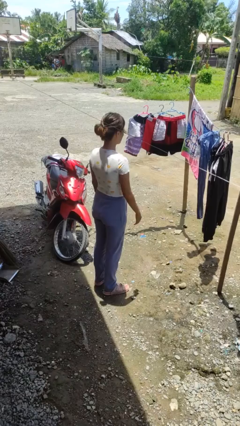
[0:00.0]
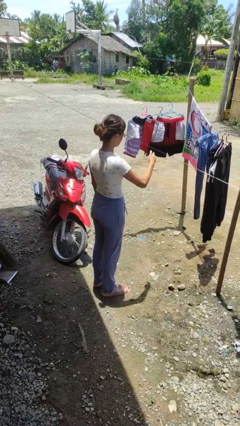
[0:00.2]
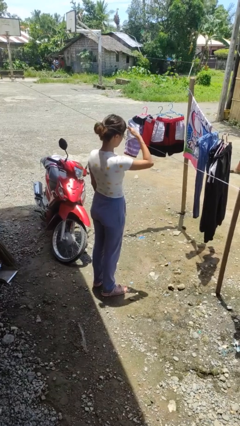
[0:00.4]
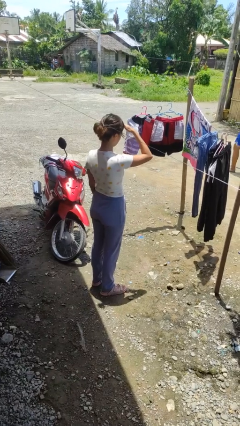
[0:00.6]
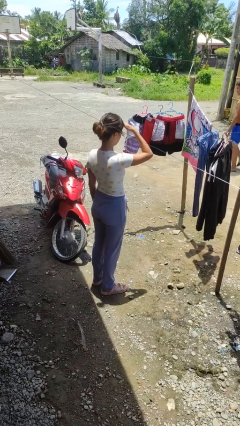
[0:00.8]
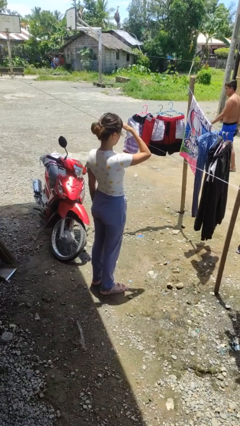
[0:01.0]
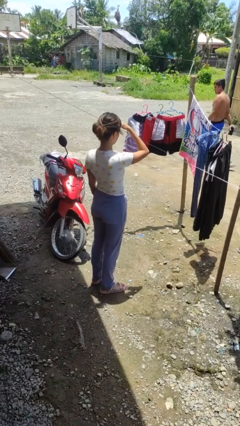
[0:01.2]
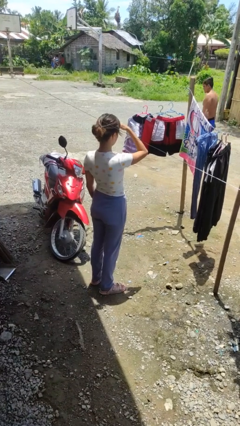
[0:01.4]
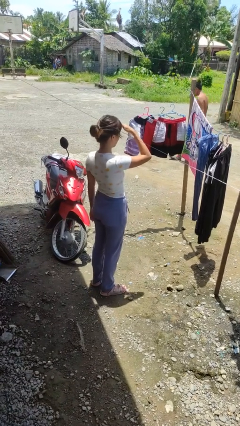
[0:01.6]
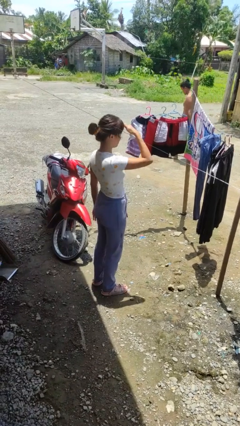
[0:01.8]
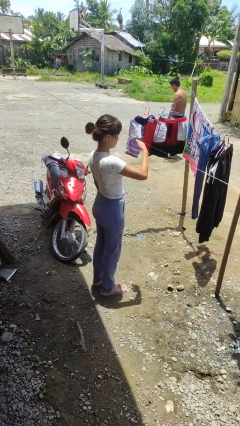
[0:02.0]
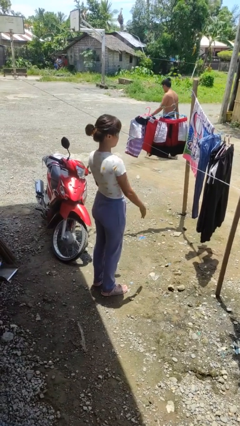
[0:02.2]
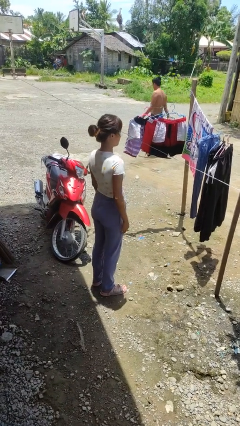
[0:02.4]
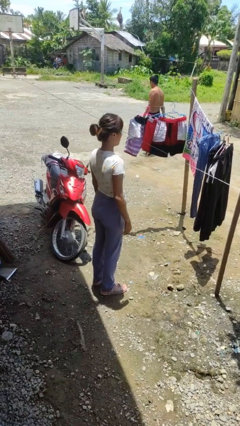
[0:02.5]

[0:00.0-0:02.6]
person shades eyes

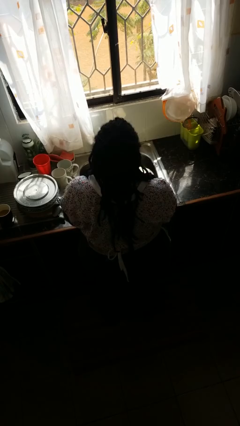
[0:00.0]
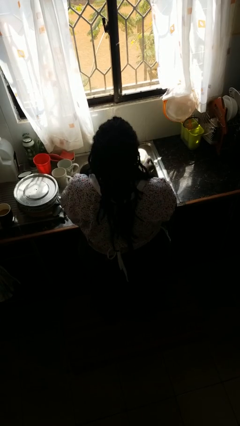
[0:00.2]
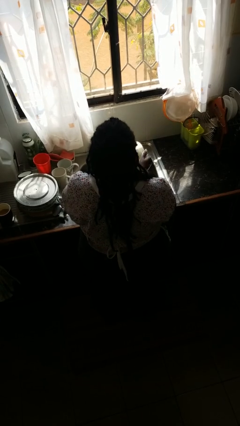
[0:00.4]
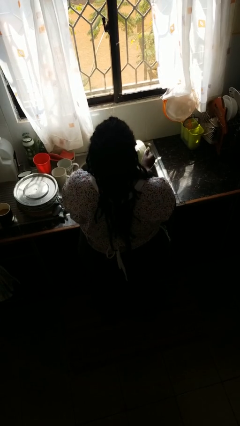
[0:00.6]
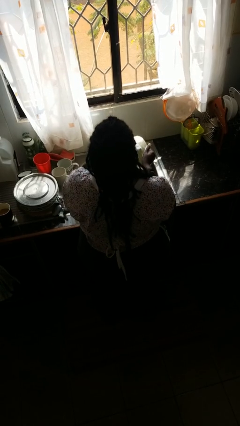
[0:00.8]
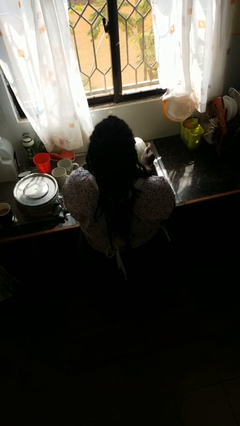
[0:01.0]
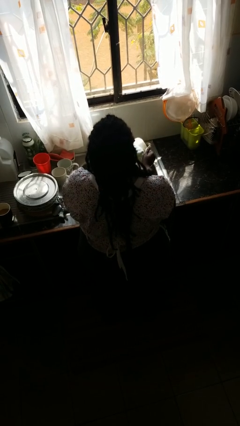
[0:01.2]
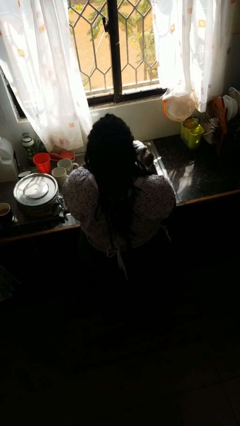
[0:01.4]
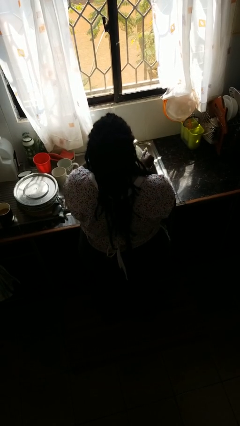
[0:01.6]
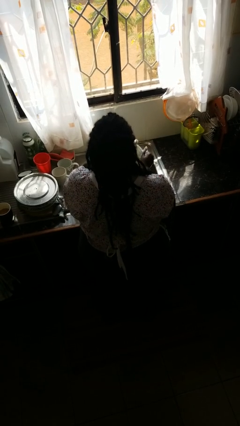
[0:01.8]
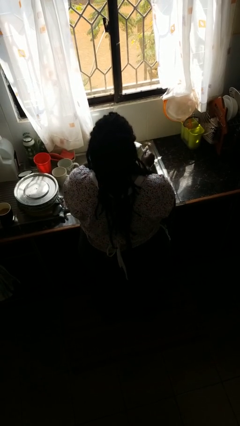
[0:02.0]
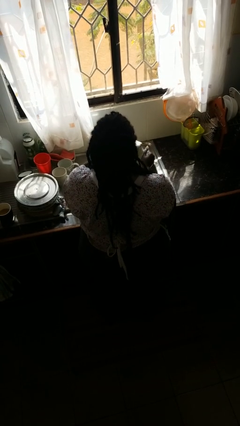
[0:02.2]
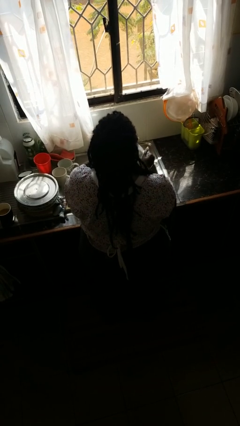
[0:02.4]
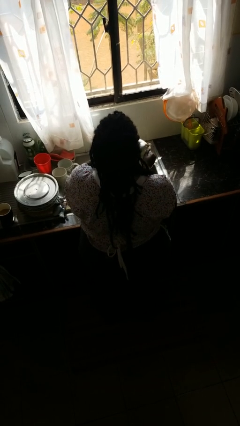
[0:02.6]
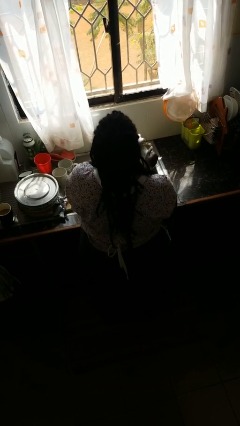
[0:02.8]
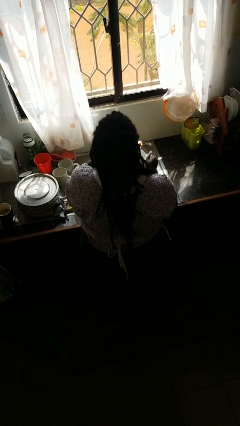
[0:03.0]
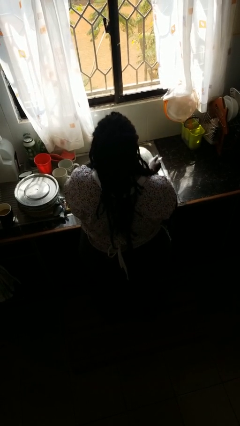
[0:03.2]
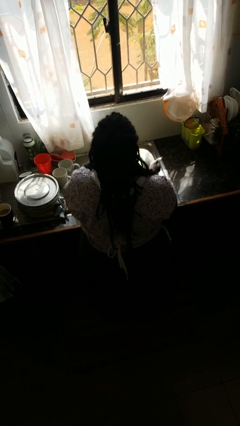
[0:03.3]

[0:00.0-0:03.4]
person washes dish

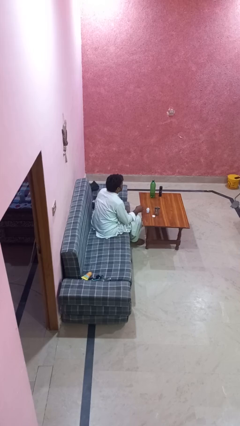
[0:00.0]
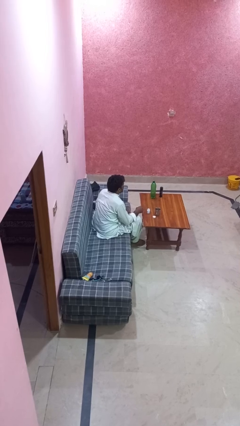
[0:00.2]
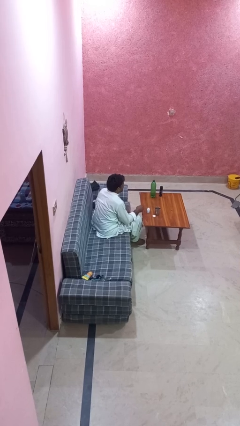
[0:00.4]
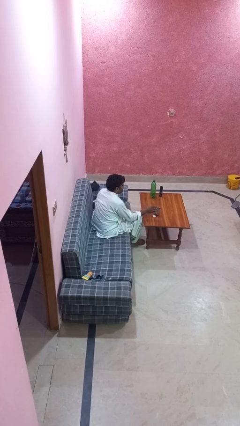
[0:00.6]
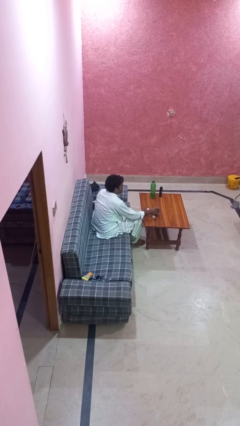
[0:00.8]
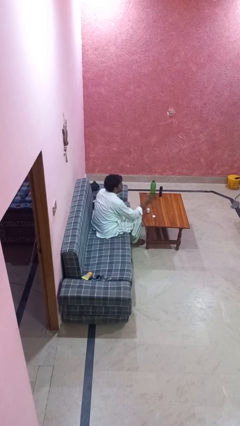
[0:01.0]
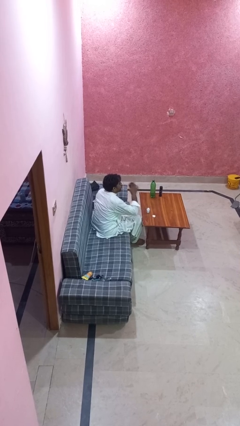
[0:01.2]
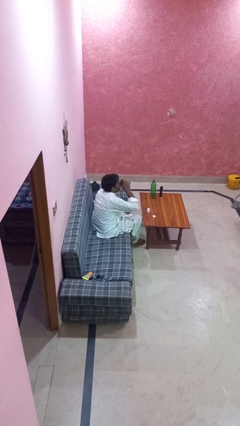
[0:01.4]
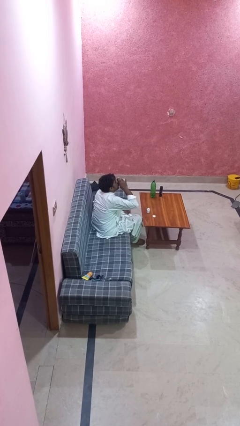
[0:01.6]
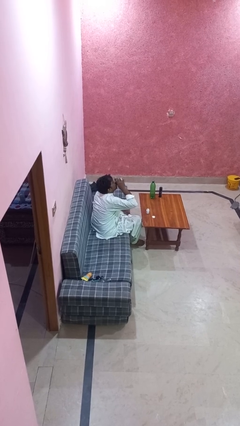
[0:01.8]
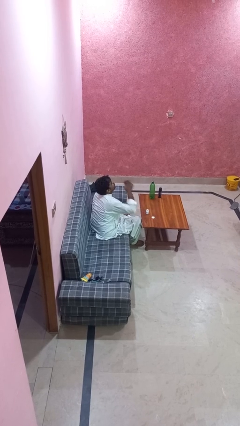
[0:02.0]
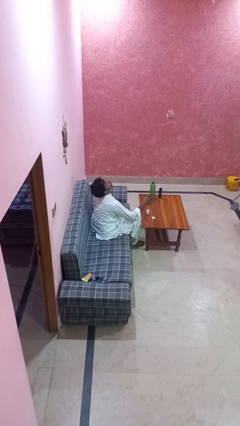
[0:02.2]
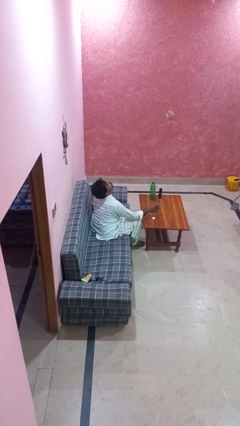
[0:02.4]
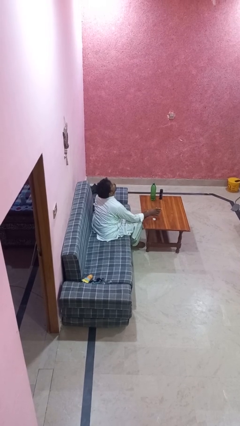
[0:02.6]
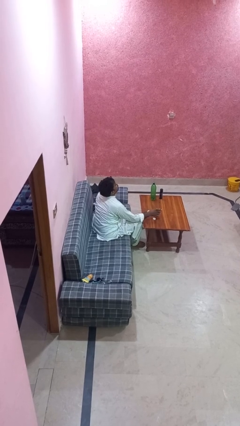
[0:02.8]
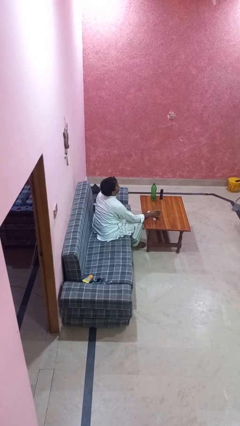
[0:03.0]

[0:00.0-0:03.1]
person drinks from cup

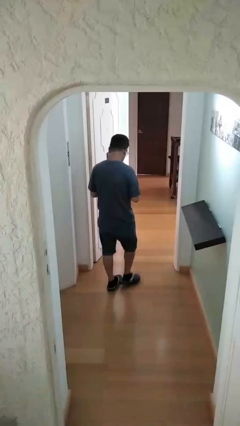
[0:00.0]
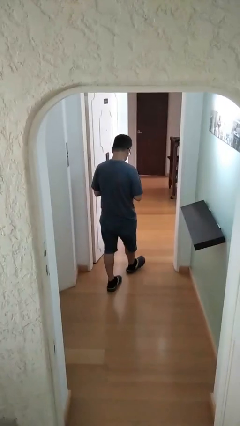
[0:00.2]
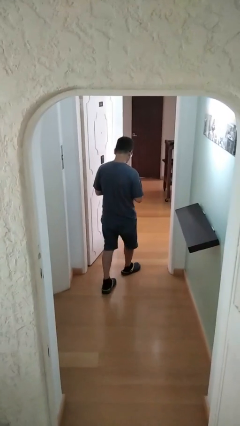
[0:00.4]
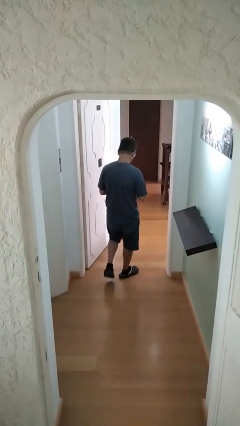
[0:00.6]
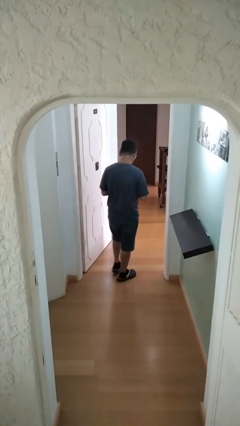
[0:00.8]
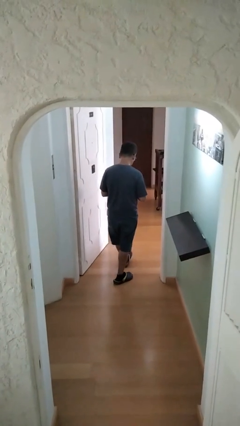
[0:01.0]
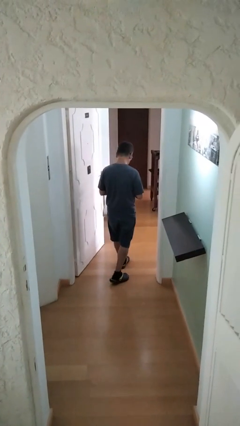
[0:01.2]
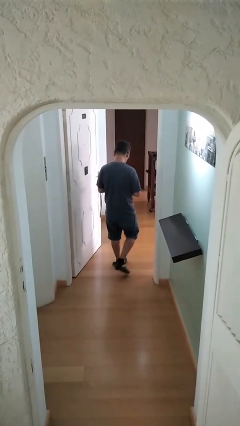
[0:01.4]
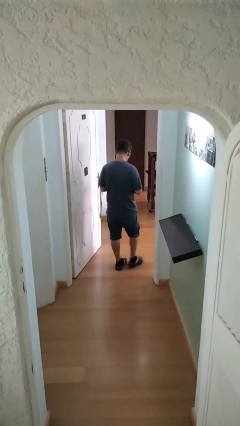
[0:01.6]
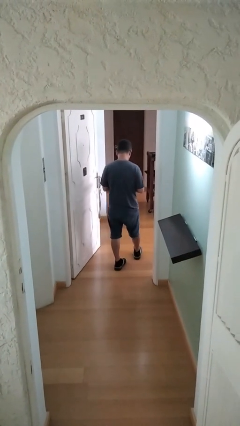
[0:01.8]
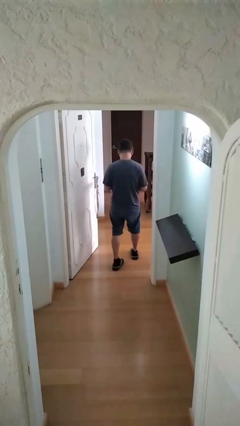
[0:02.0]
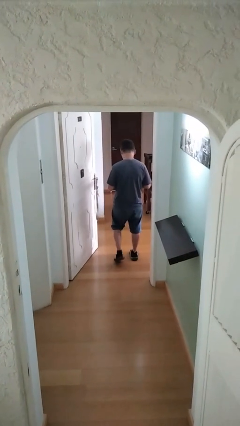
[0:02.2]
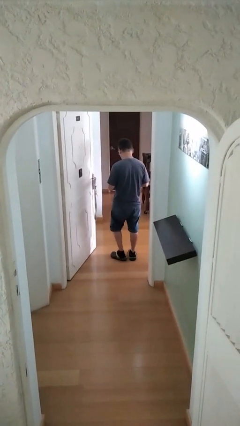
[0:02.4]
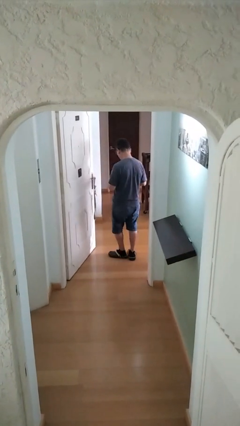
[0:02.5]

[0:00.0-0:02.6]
person exits scene through structure

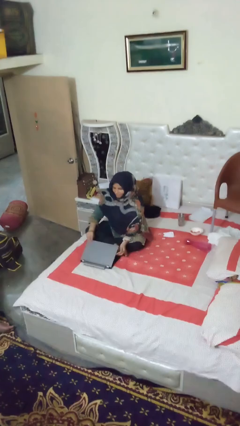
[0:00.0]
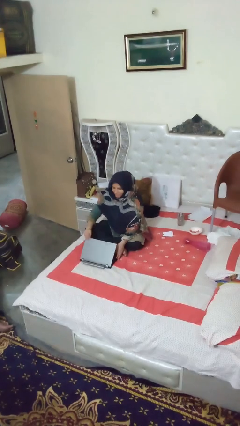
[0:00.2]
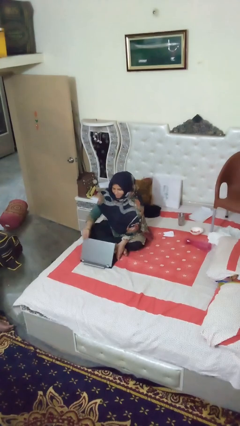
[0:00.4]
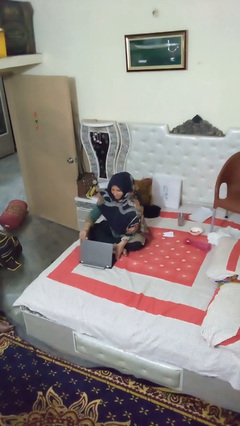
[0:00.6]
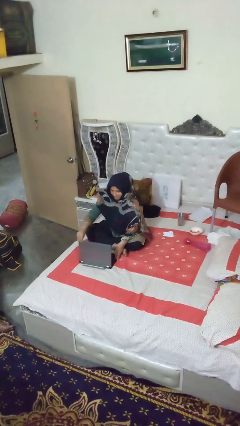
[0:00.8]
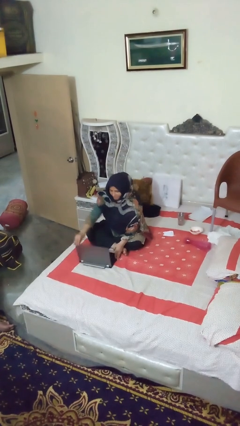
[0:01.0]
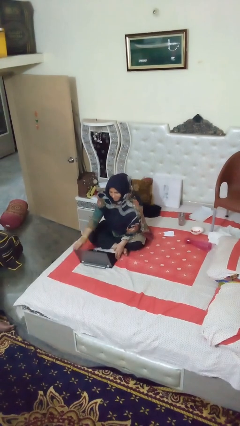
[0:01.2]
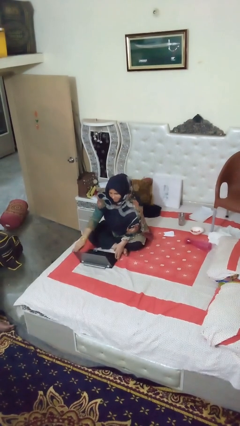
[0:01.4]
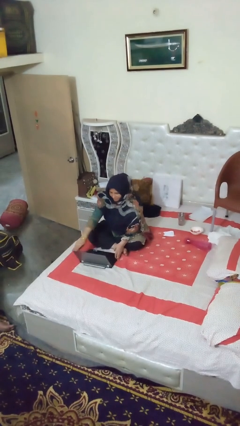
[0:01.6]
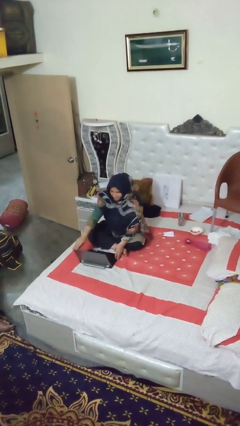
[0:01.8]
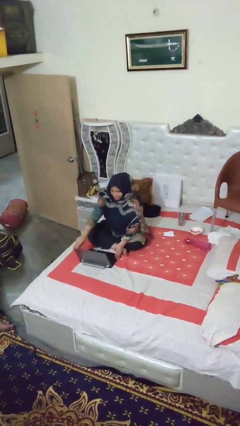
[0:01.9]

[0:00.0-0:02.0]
person opens laptop

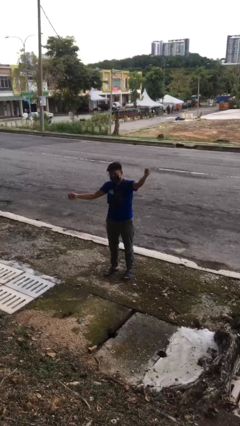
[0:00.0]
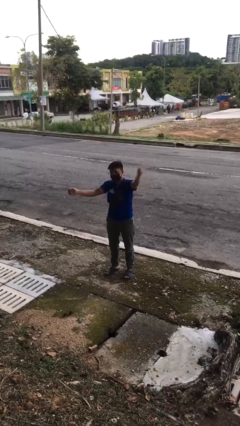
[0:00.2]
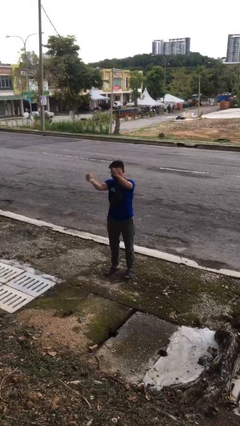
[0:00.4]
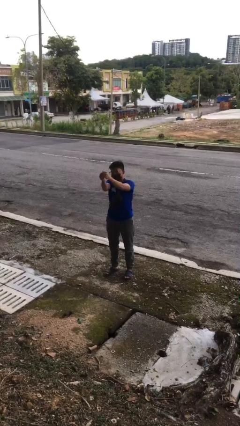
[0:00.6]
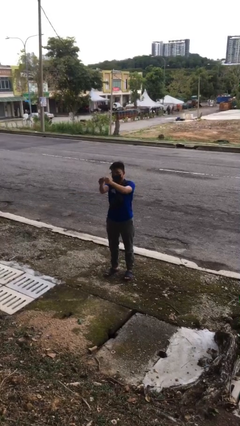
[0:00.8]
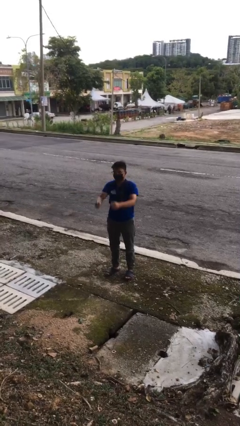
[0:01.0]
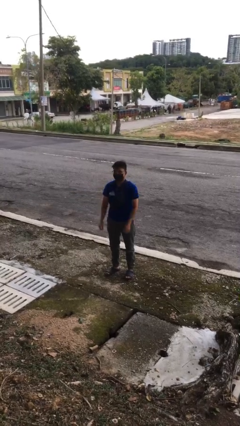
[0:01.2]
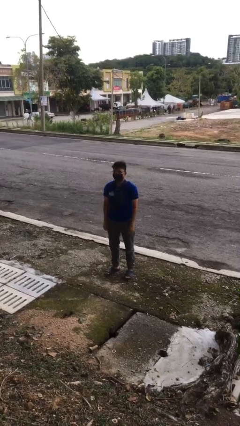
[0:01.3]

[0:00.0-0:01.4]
person gestures zoom out

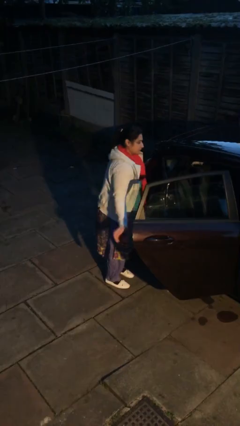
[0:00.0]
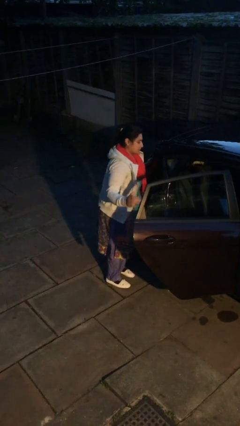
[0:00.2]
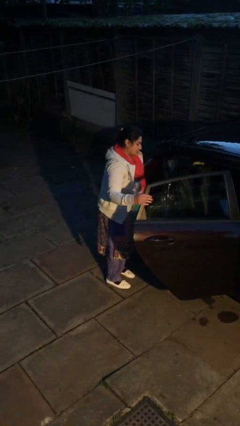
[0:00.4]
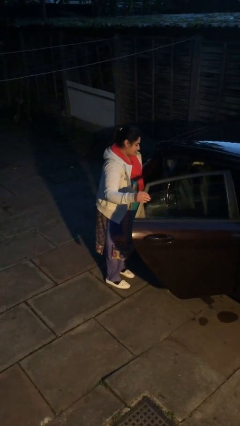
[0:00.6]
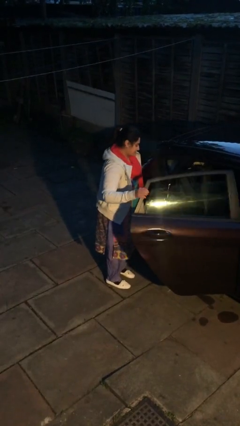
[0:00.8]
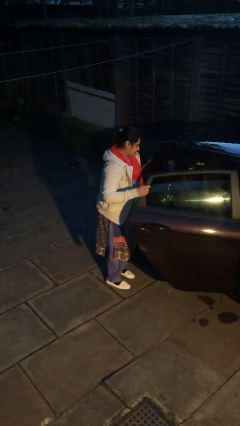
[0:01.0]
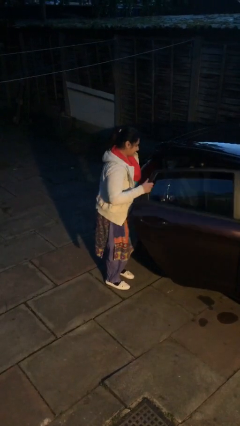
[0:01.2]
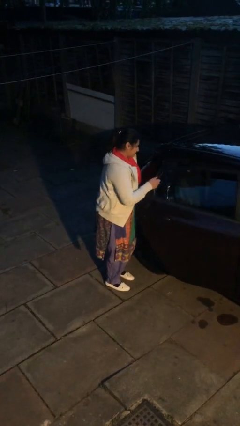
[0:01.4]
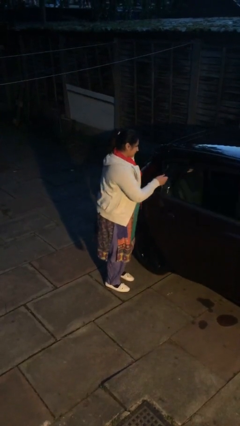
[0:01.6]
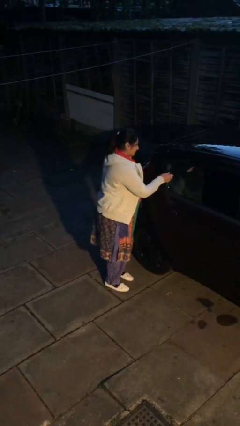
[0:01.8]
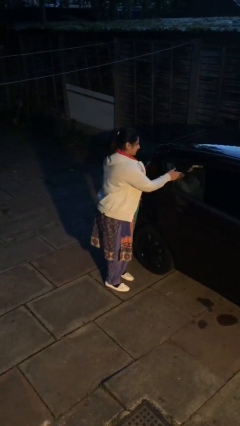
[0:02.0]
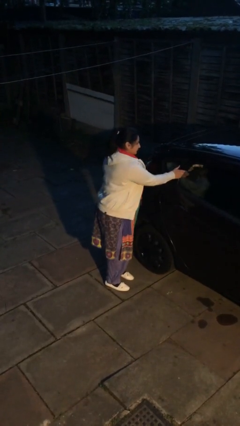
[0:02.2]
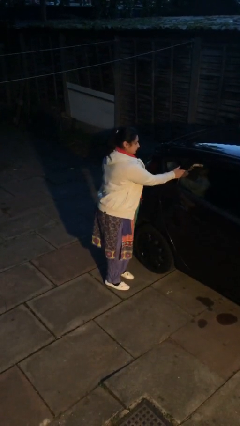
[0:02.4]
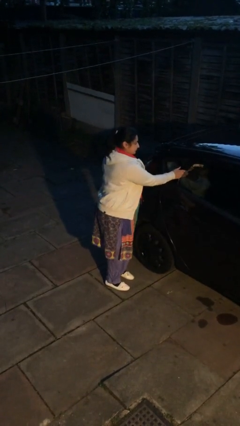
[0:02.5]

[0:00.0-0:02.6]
person closes car door
